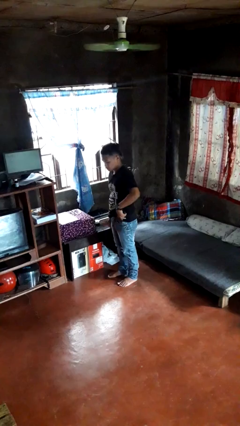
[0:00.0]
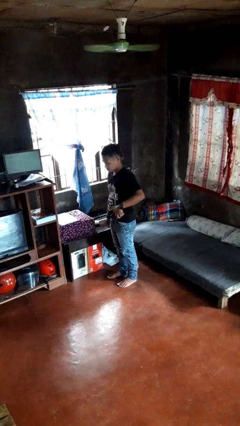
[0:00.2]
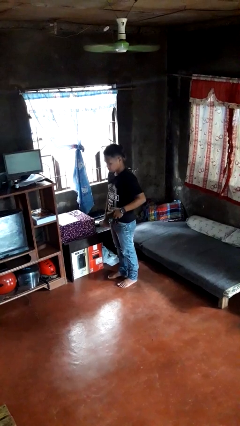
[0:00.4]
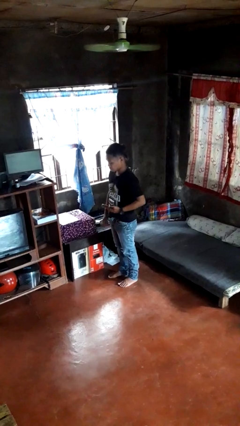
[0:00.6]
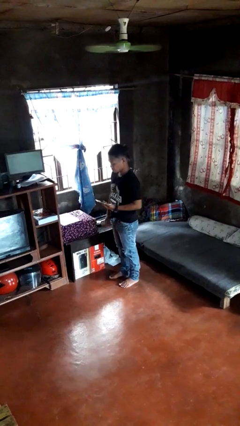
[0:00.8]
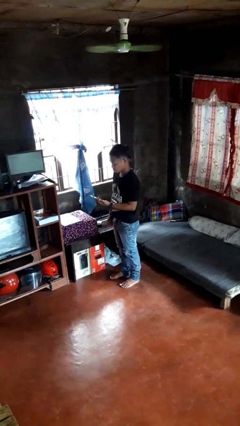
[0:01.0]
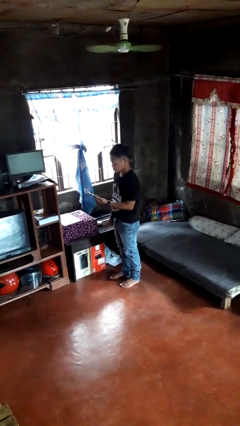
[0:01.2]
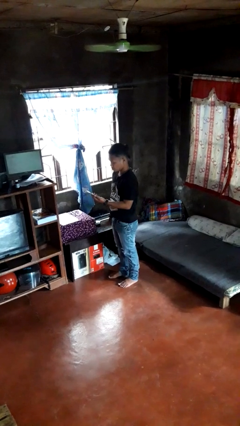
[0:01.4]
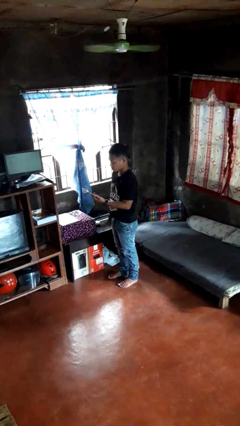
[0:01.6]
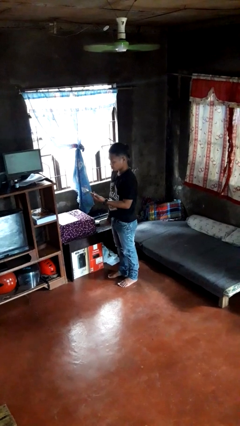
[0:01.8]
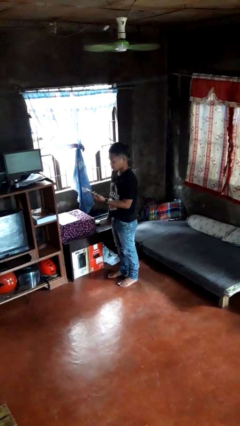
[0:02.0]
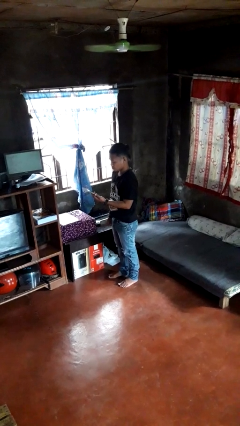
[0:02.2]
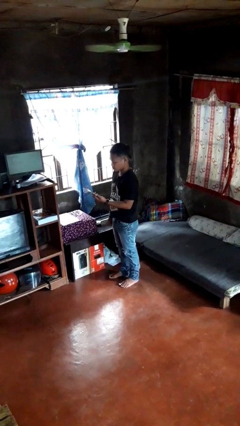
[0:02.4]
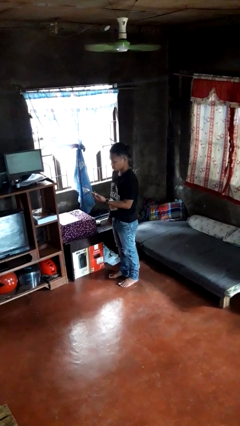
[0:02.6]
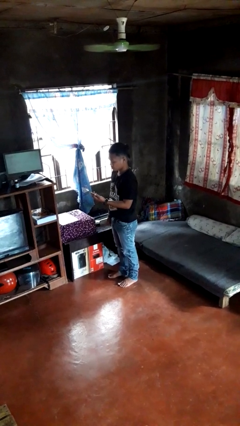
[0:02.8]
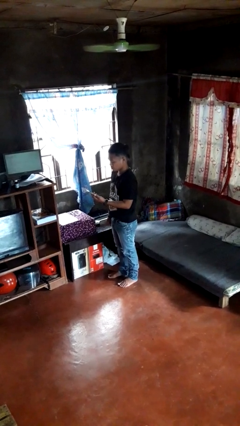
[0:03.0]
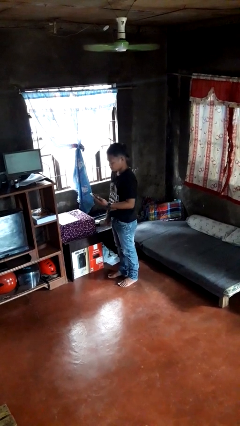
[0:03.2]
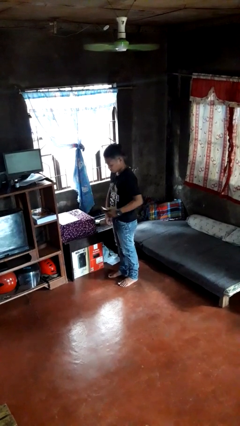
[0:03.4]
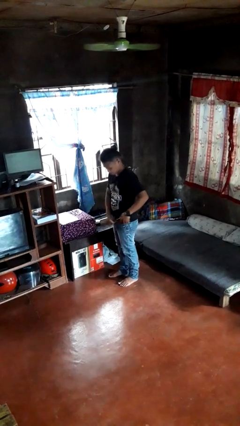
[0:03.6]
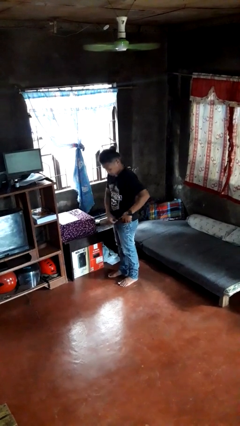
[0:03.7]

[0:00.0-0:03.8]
person takes phone from pocket

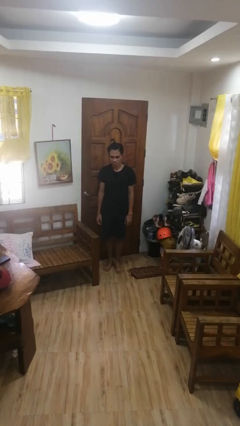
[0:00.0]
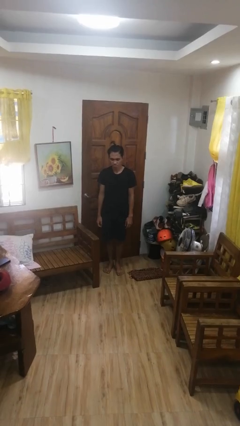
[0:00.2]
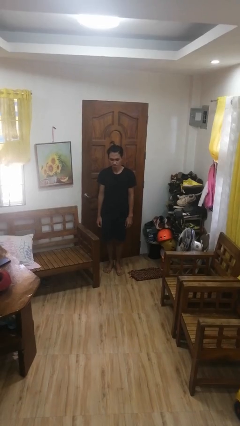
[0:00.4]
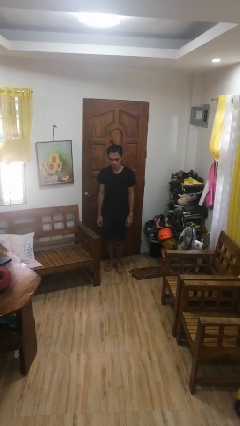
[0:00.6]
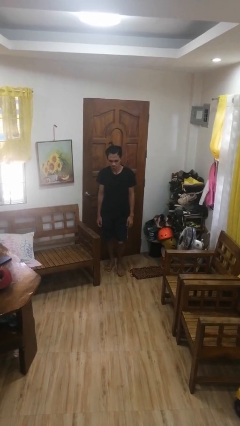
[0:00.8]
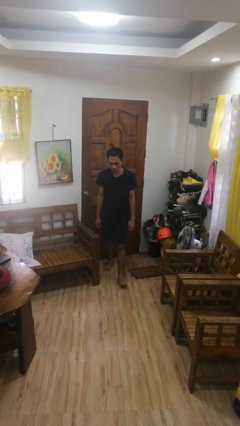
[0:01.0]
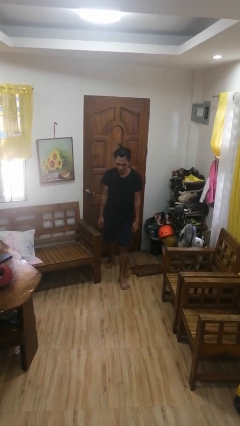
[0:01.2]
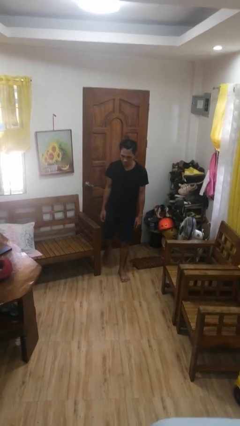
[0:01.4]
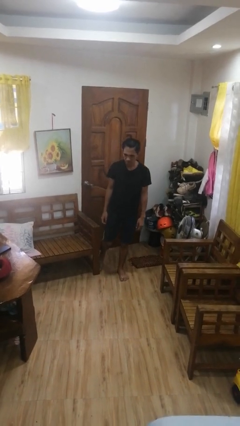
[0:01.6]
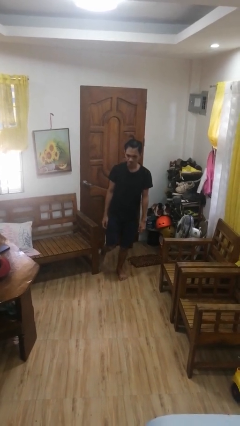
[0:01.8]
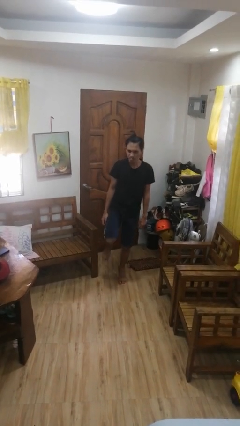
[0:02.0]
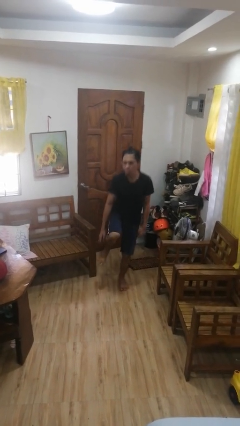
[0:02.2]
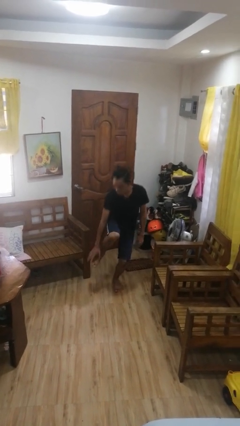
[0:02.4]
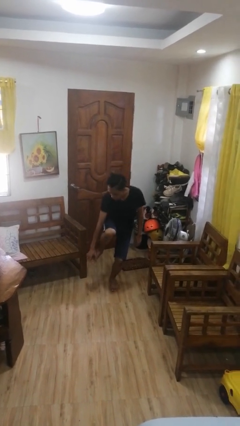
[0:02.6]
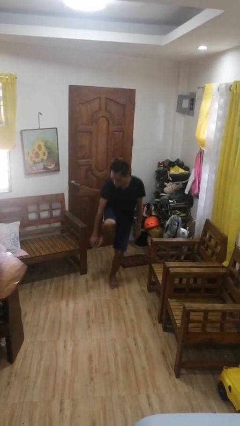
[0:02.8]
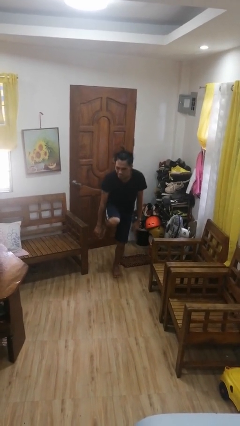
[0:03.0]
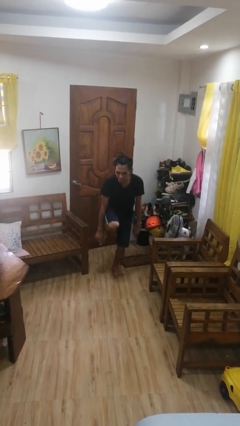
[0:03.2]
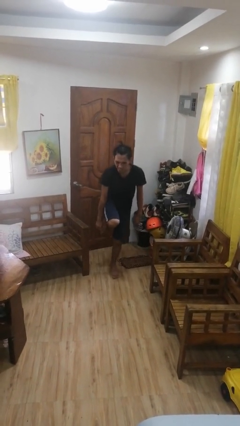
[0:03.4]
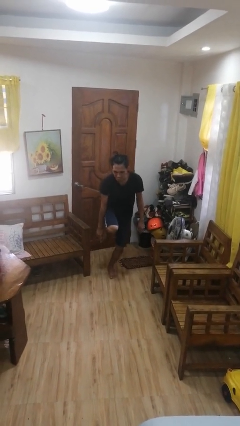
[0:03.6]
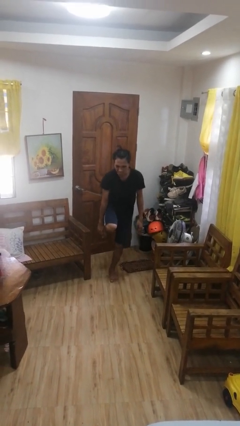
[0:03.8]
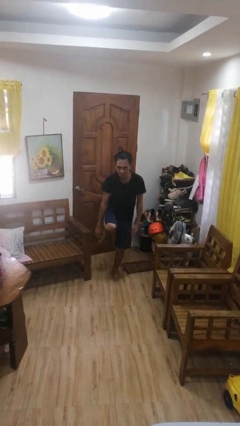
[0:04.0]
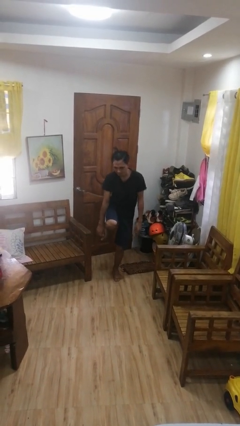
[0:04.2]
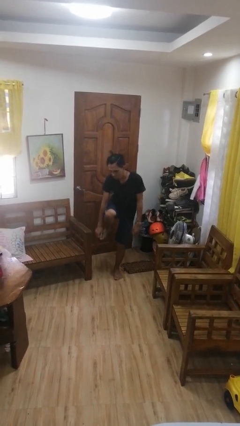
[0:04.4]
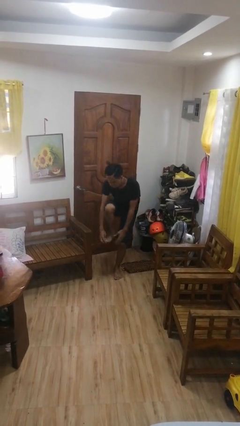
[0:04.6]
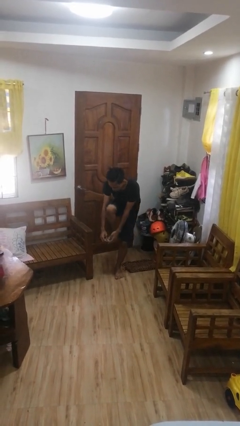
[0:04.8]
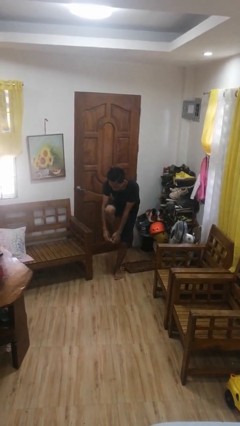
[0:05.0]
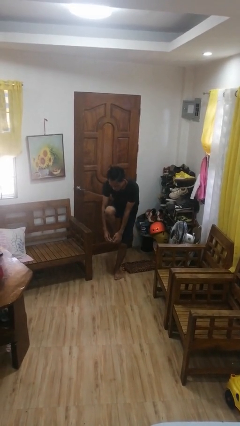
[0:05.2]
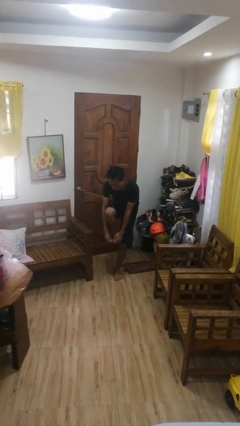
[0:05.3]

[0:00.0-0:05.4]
person stubs toe

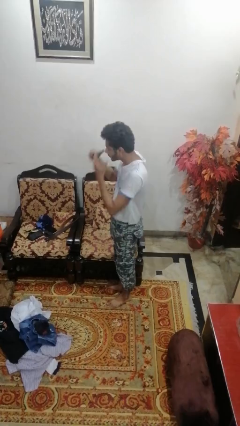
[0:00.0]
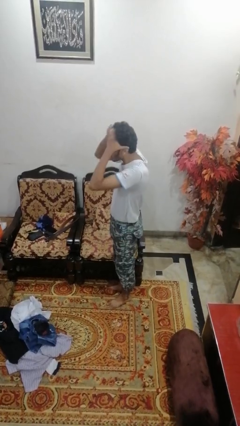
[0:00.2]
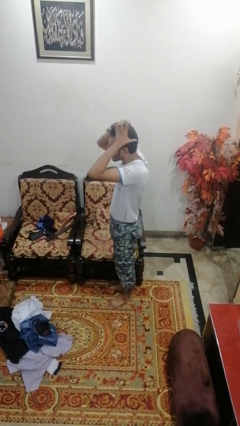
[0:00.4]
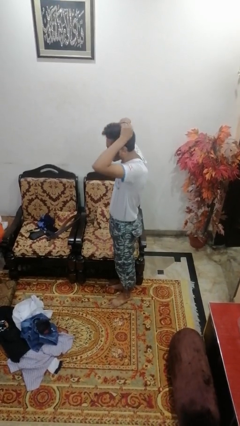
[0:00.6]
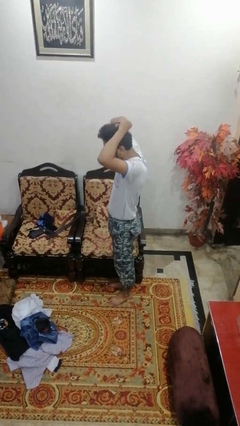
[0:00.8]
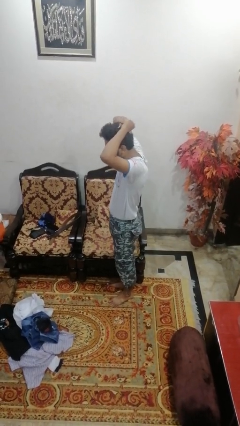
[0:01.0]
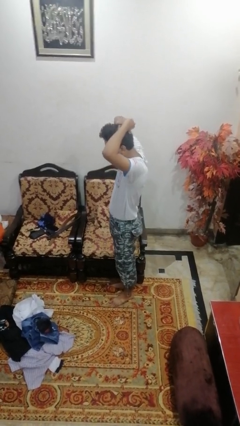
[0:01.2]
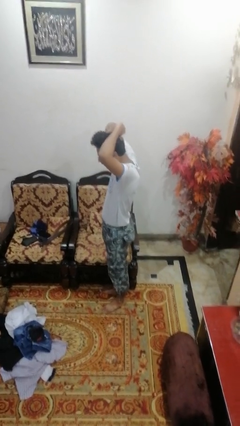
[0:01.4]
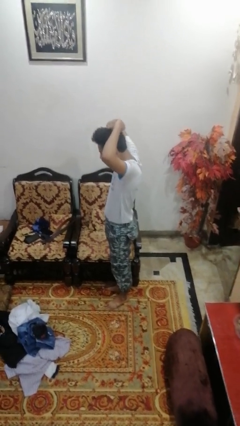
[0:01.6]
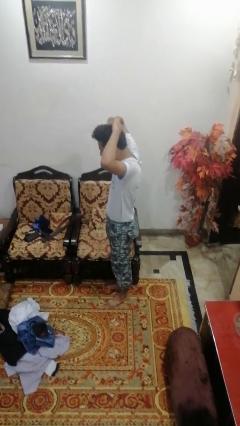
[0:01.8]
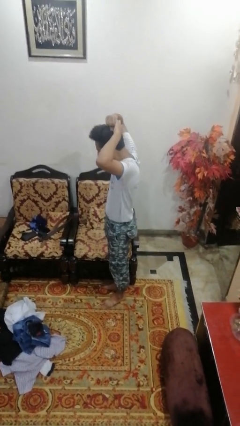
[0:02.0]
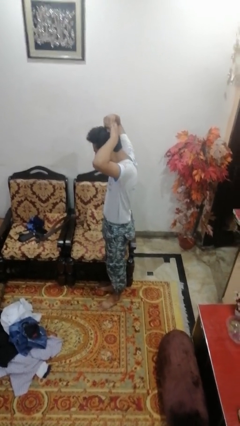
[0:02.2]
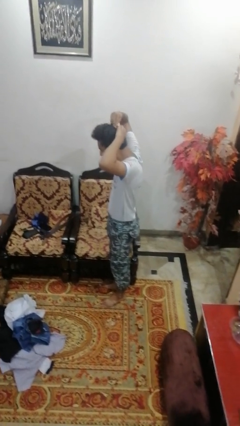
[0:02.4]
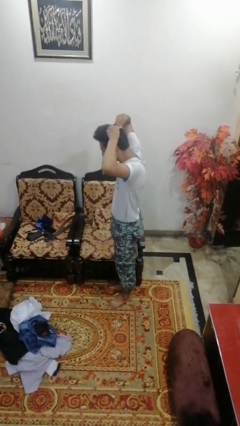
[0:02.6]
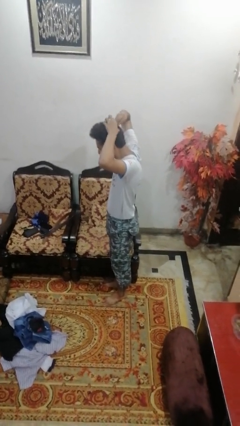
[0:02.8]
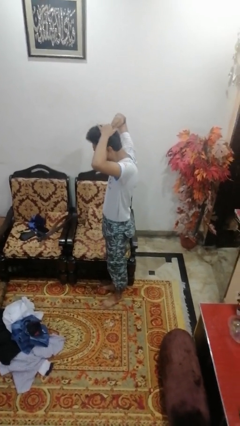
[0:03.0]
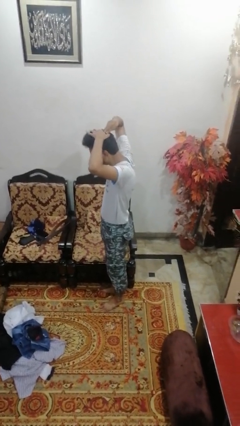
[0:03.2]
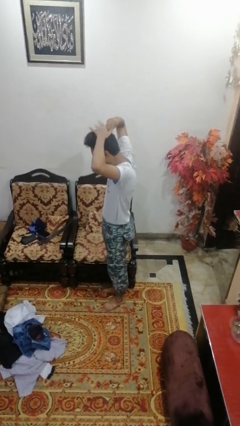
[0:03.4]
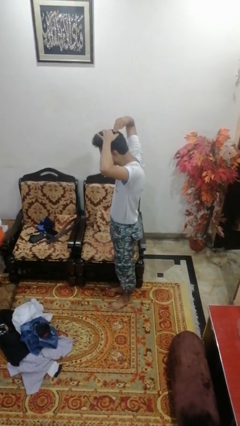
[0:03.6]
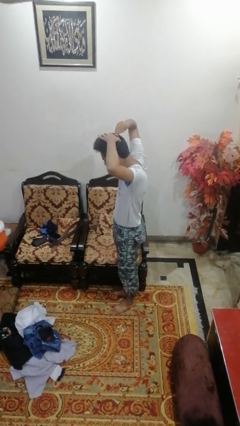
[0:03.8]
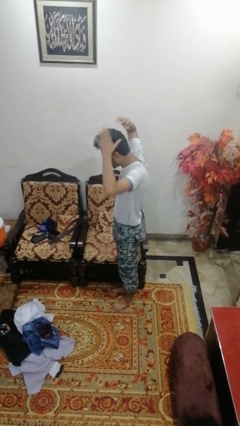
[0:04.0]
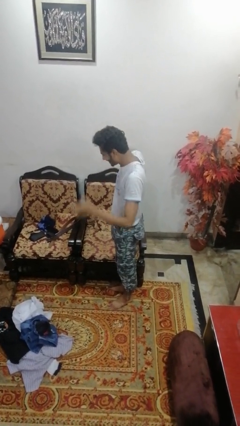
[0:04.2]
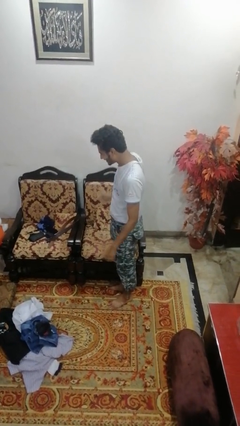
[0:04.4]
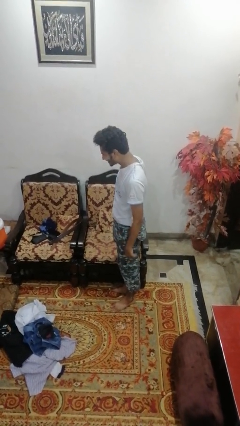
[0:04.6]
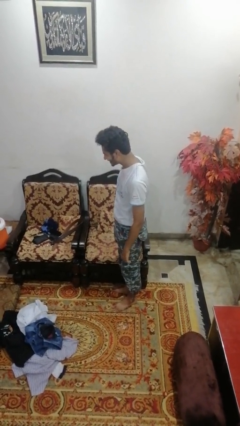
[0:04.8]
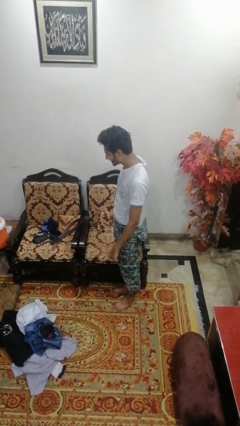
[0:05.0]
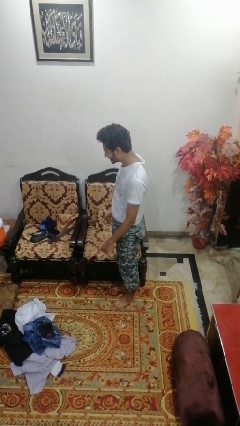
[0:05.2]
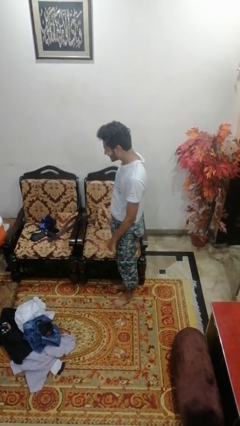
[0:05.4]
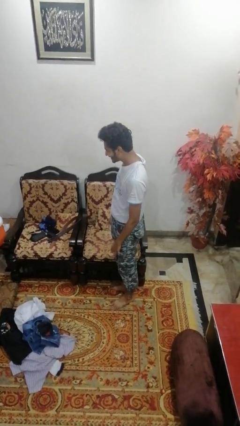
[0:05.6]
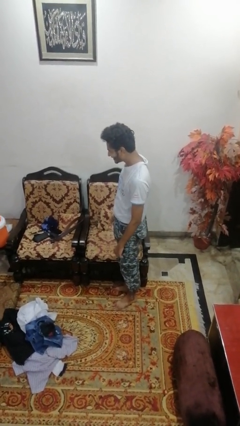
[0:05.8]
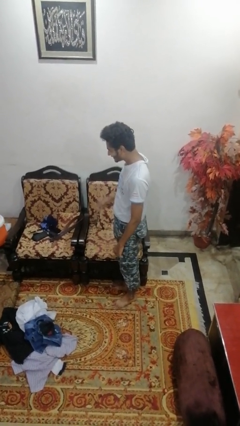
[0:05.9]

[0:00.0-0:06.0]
person puts hair in ponytail

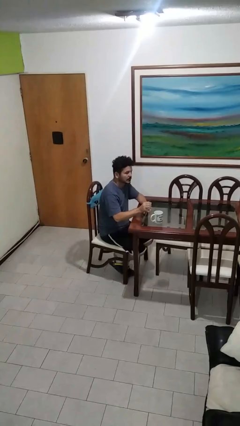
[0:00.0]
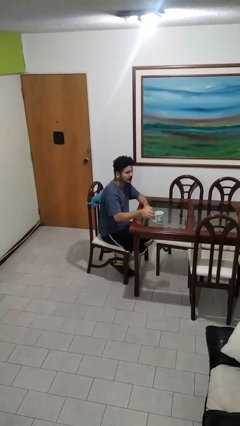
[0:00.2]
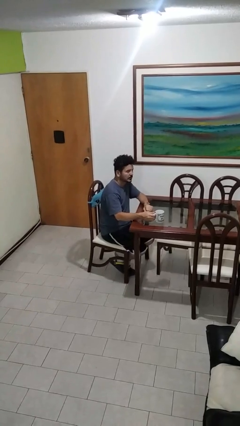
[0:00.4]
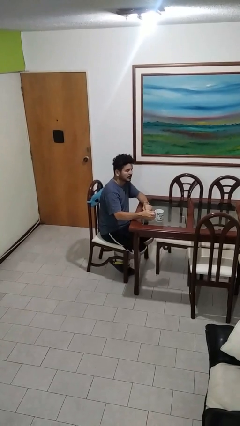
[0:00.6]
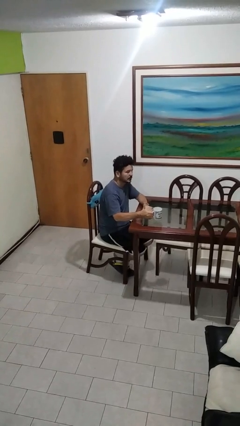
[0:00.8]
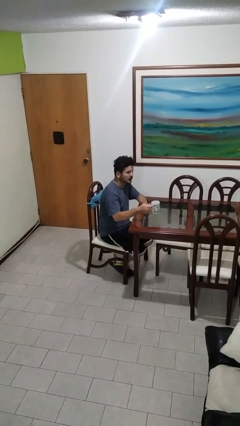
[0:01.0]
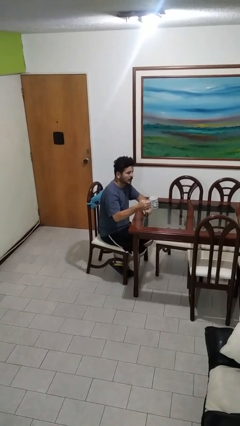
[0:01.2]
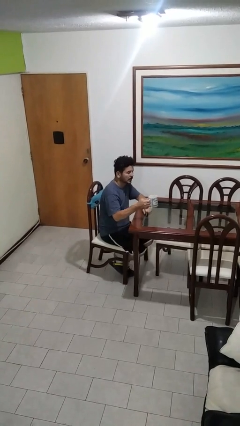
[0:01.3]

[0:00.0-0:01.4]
person picks up object from table

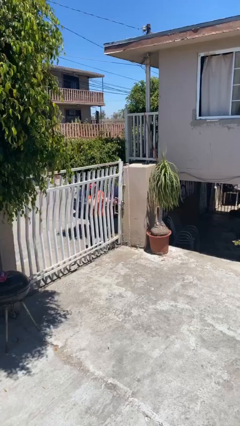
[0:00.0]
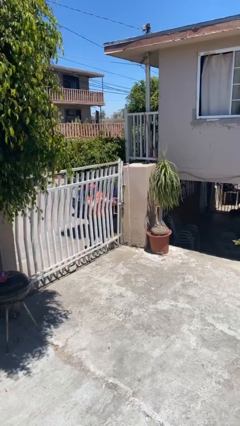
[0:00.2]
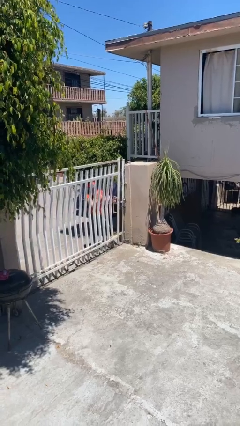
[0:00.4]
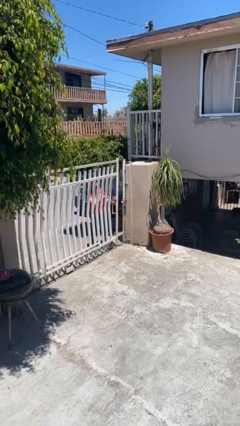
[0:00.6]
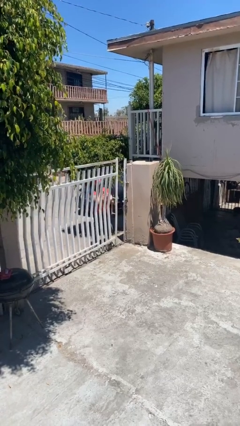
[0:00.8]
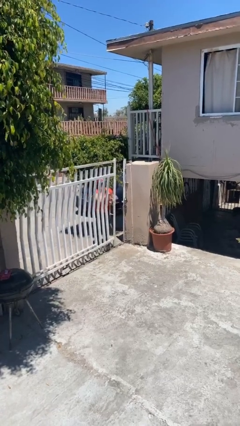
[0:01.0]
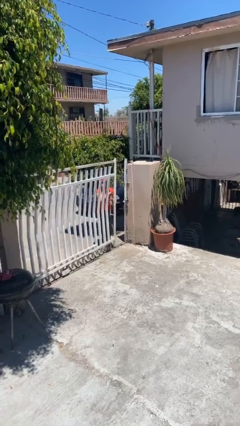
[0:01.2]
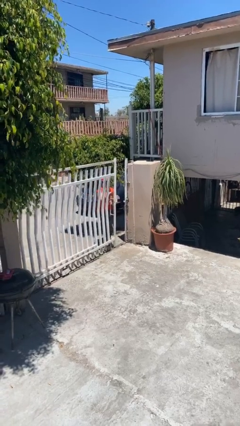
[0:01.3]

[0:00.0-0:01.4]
person opens facility door
